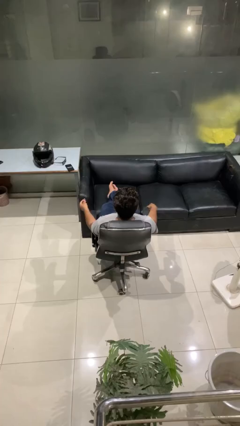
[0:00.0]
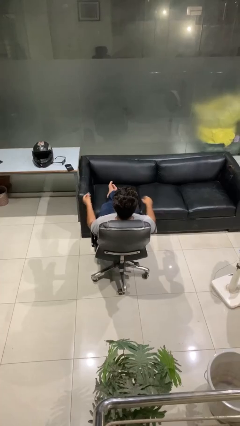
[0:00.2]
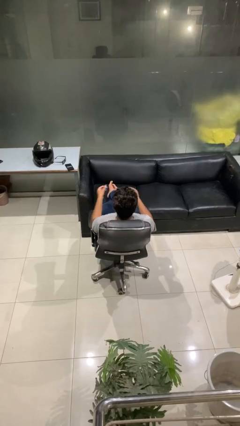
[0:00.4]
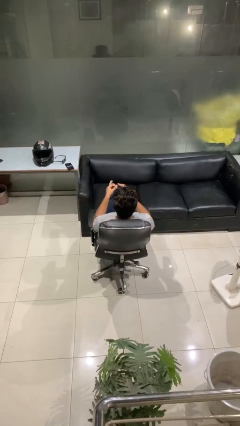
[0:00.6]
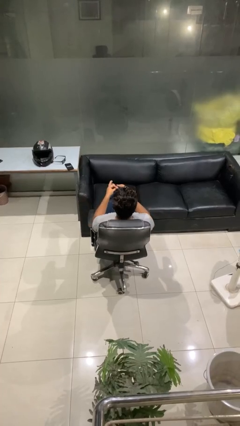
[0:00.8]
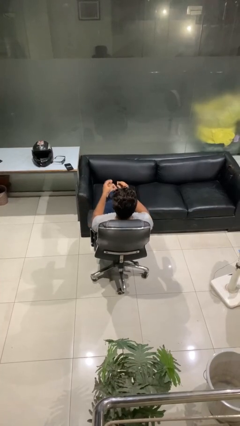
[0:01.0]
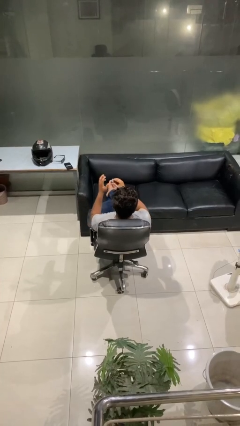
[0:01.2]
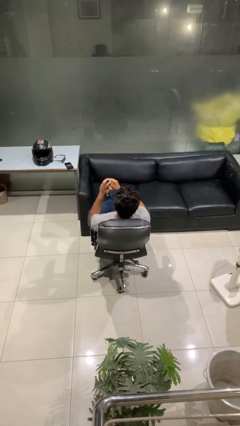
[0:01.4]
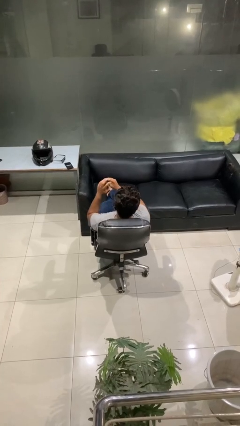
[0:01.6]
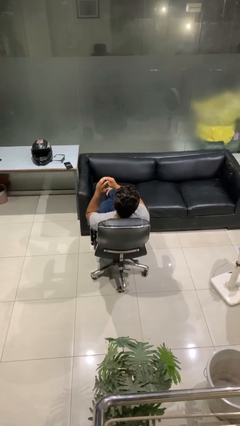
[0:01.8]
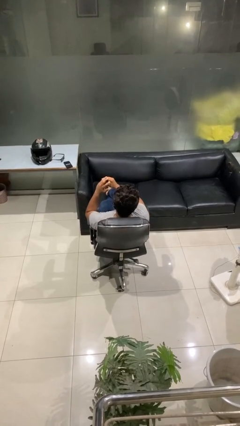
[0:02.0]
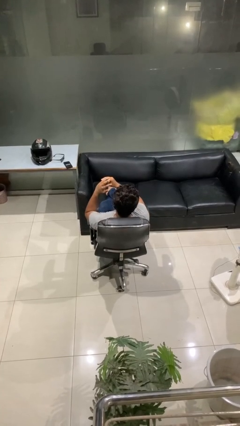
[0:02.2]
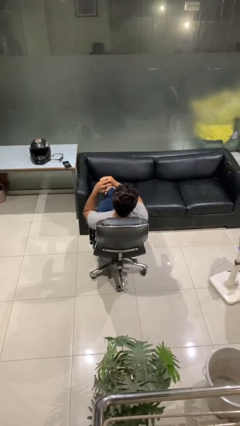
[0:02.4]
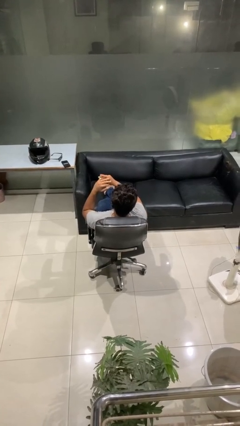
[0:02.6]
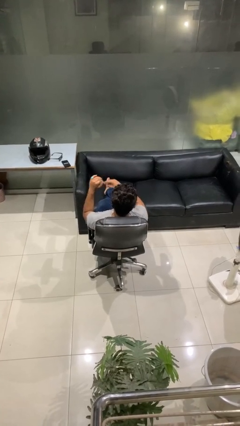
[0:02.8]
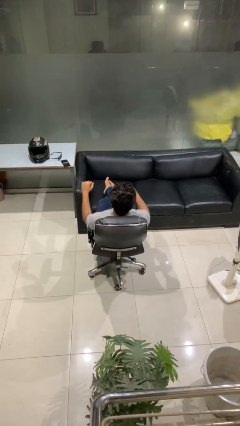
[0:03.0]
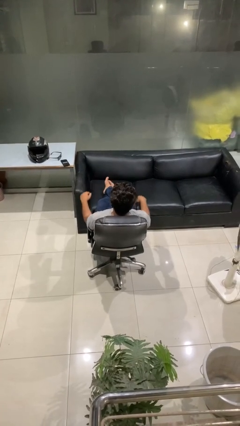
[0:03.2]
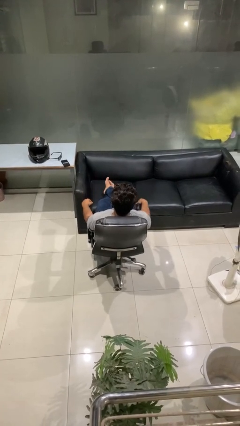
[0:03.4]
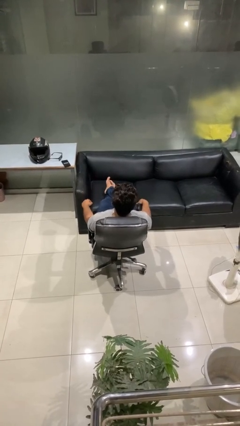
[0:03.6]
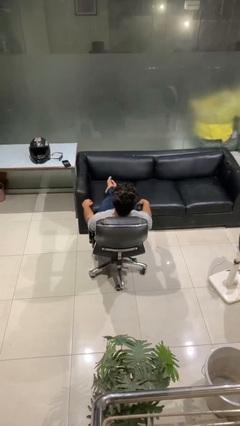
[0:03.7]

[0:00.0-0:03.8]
person puts on ring

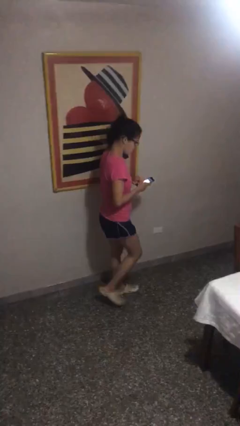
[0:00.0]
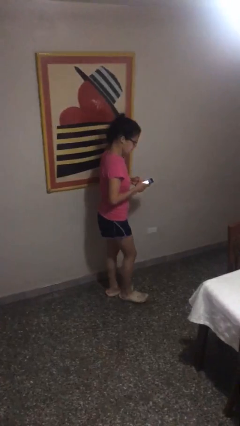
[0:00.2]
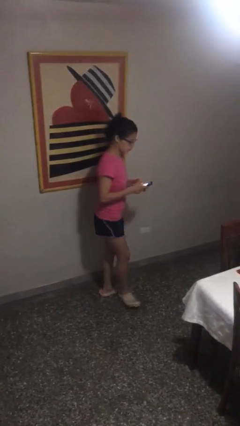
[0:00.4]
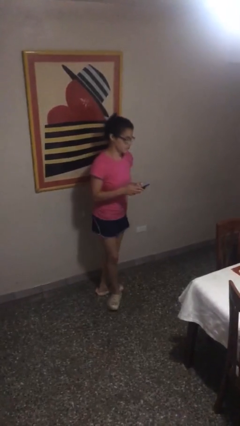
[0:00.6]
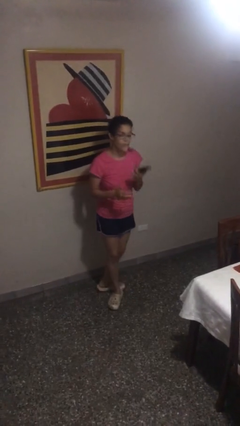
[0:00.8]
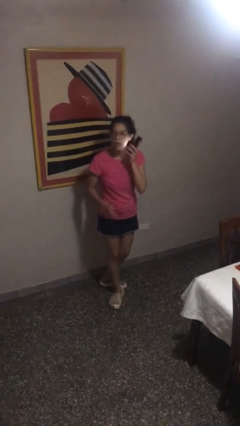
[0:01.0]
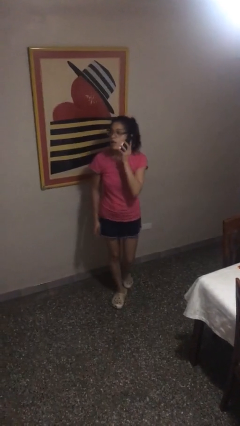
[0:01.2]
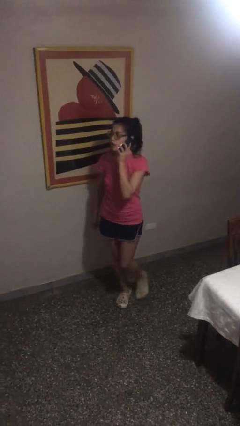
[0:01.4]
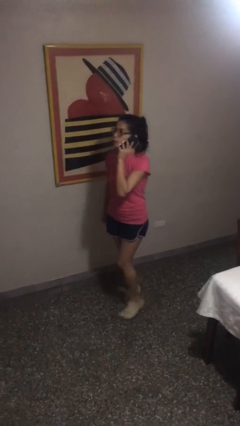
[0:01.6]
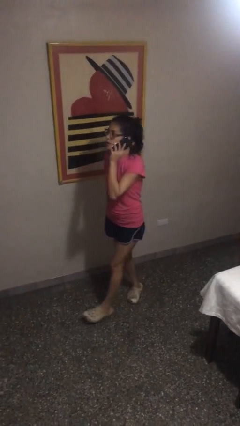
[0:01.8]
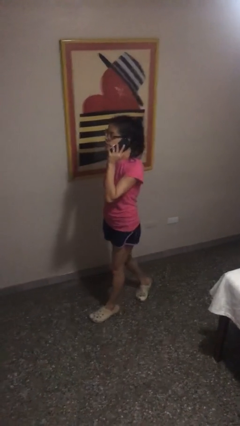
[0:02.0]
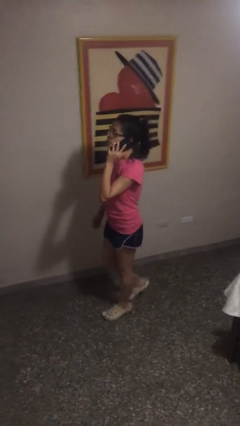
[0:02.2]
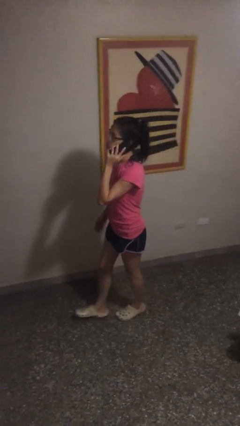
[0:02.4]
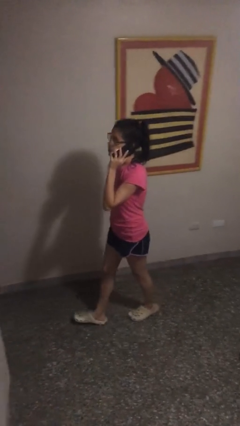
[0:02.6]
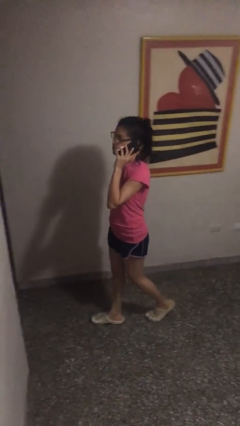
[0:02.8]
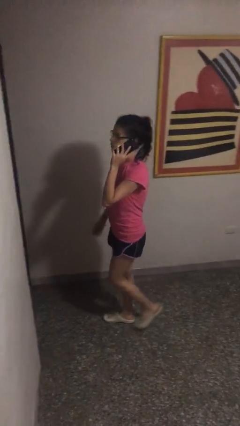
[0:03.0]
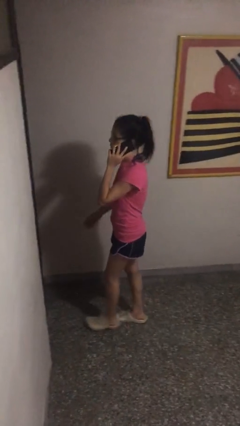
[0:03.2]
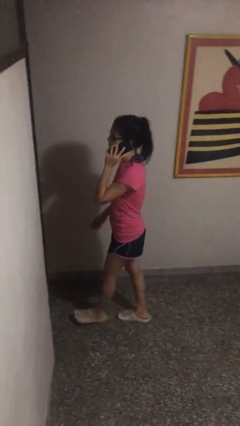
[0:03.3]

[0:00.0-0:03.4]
person talks on phone

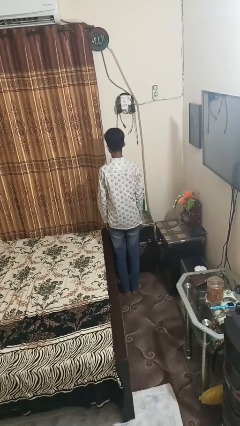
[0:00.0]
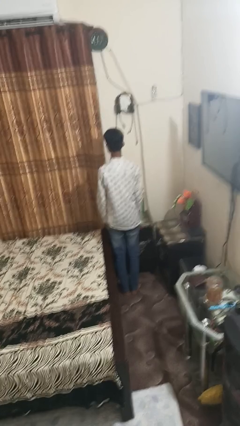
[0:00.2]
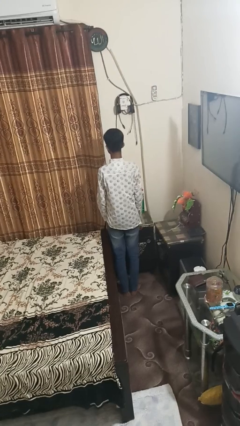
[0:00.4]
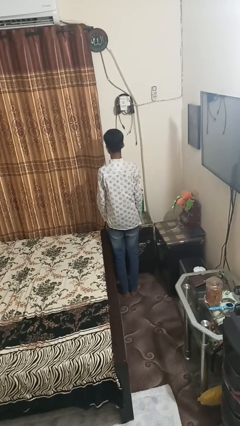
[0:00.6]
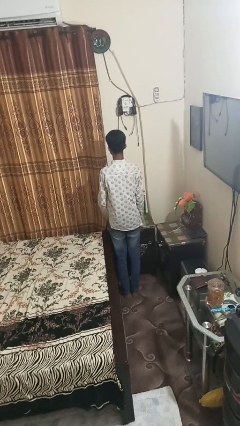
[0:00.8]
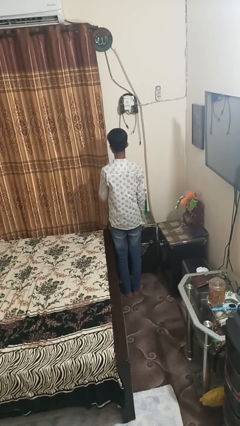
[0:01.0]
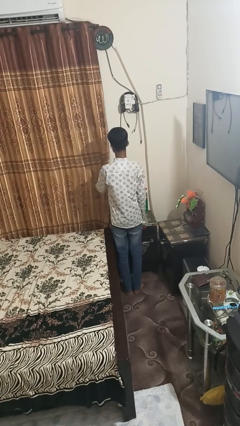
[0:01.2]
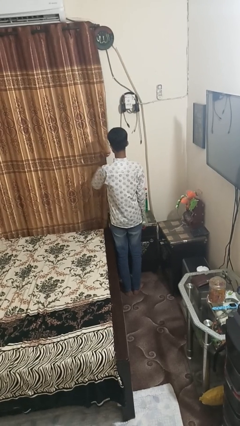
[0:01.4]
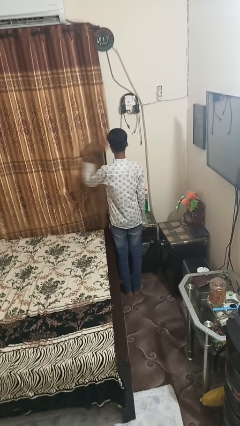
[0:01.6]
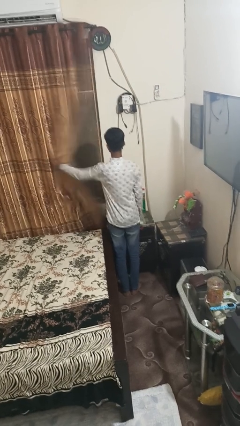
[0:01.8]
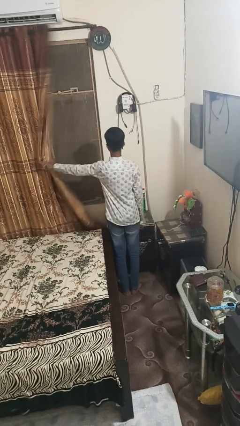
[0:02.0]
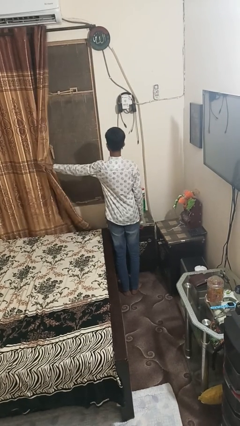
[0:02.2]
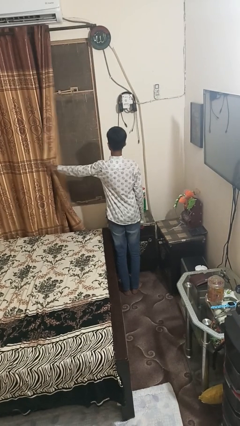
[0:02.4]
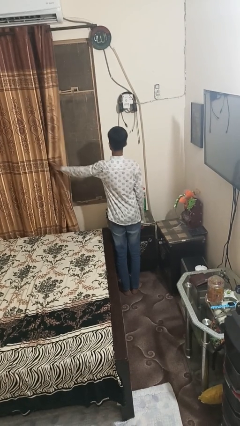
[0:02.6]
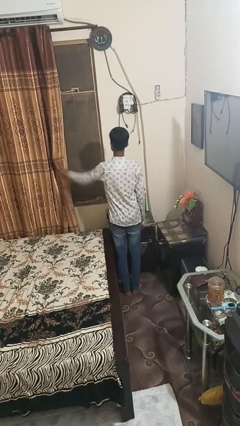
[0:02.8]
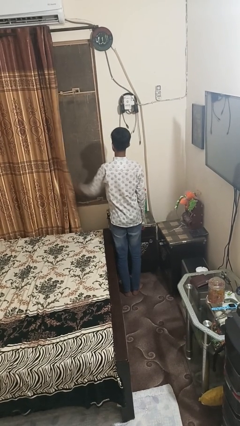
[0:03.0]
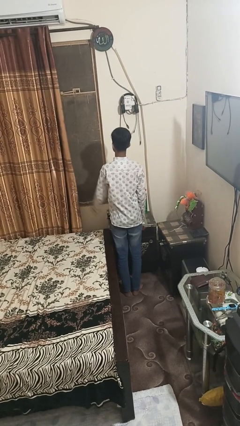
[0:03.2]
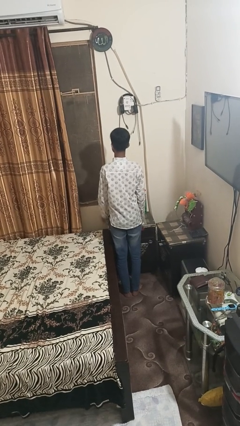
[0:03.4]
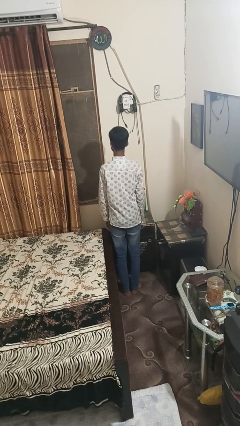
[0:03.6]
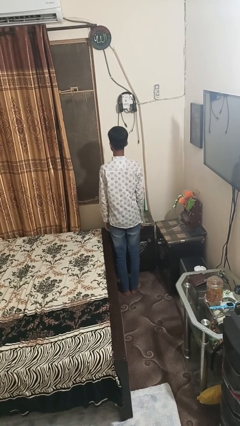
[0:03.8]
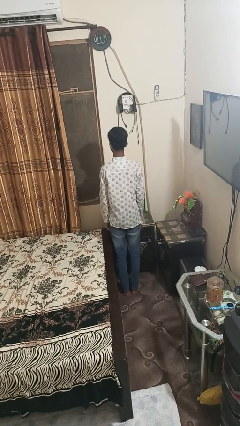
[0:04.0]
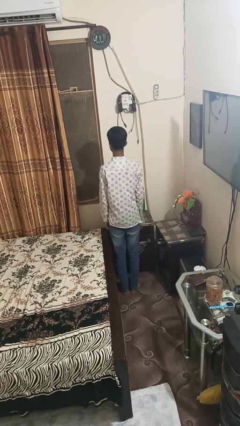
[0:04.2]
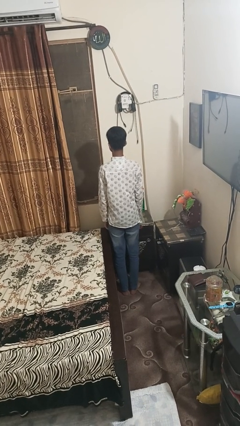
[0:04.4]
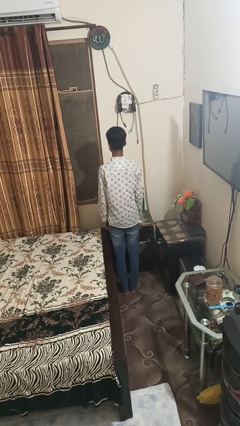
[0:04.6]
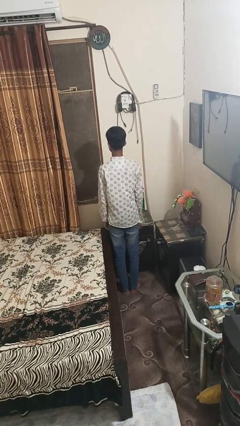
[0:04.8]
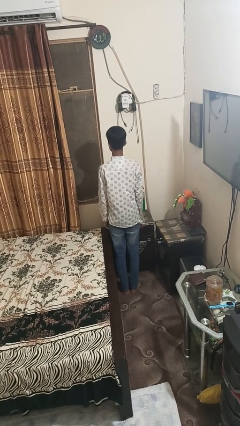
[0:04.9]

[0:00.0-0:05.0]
person opens curtains

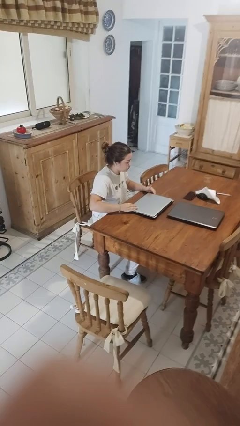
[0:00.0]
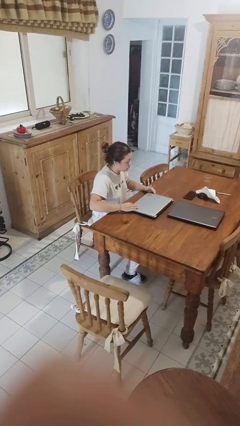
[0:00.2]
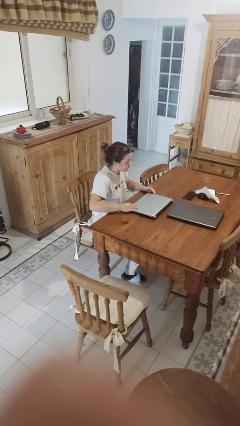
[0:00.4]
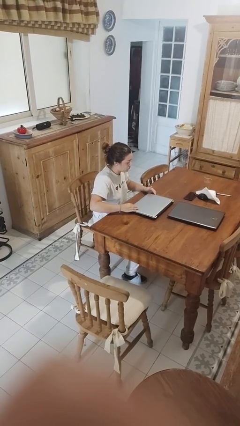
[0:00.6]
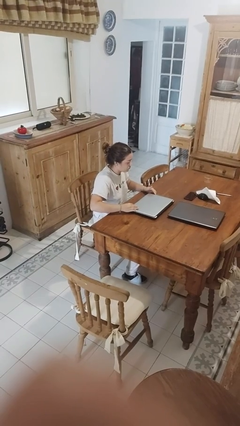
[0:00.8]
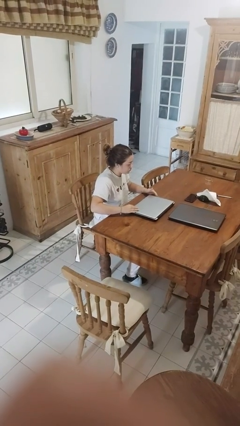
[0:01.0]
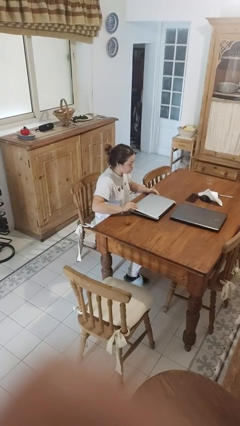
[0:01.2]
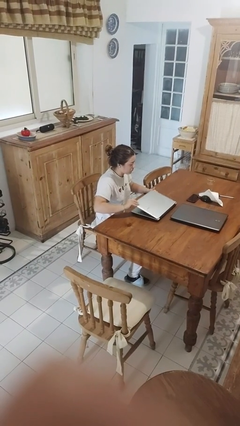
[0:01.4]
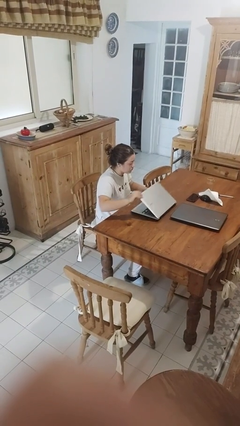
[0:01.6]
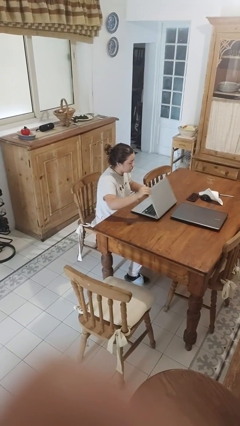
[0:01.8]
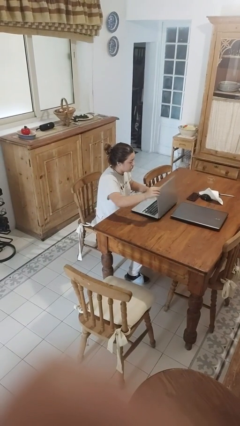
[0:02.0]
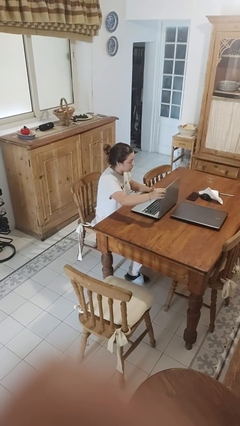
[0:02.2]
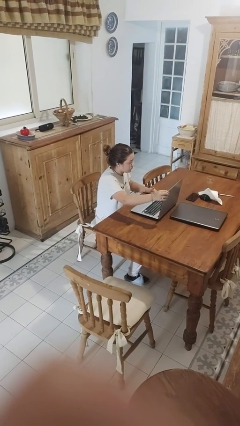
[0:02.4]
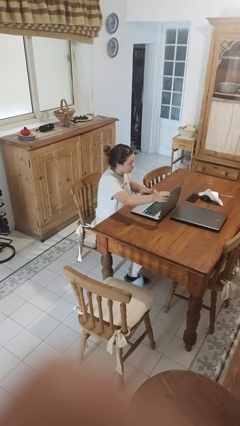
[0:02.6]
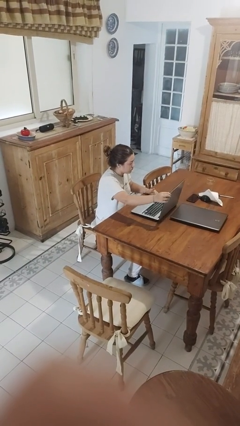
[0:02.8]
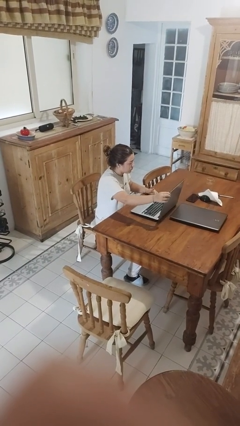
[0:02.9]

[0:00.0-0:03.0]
person opens laptop

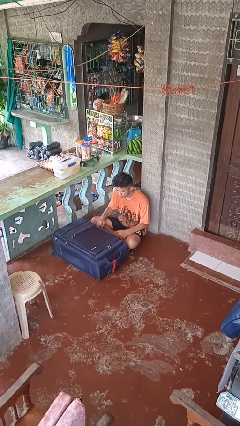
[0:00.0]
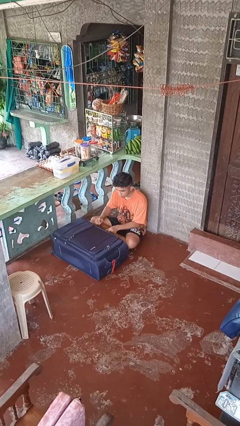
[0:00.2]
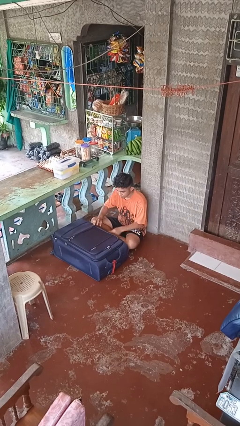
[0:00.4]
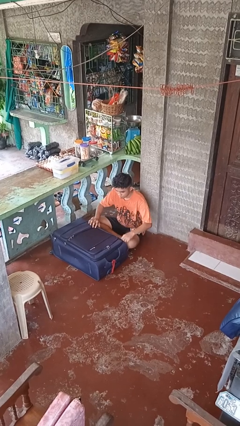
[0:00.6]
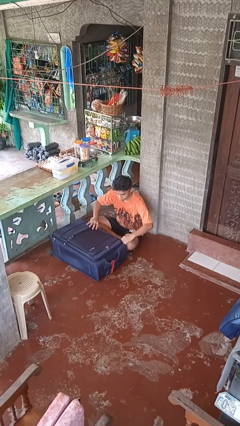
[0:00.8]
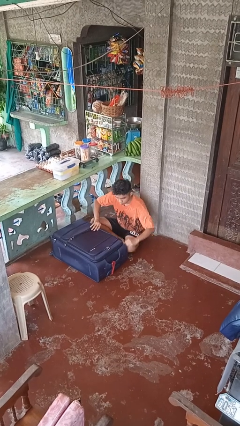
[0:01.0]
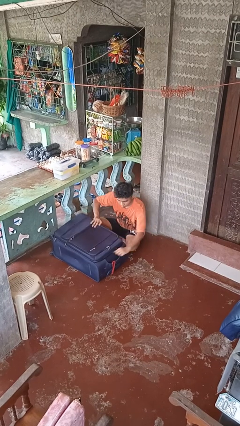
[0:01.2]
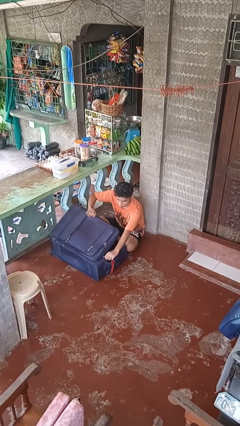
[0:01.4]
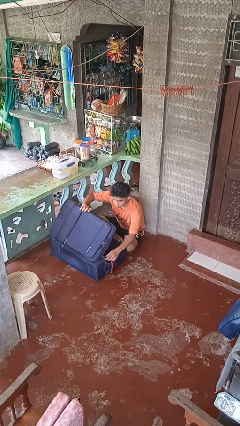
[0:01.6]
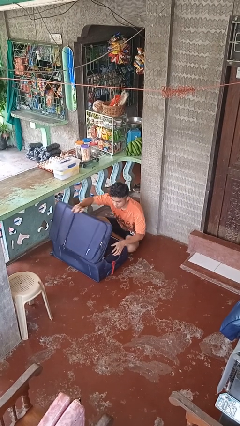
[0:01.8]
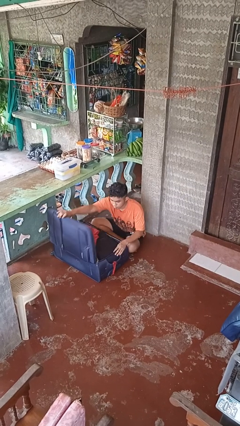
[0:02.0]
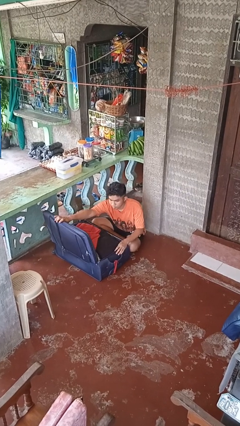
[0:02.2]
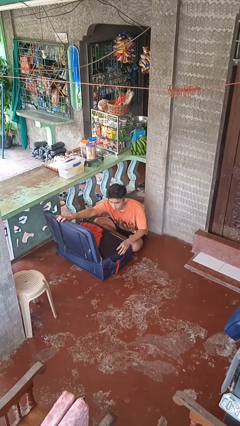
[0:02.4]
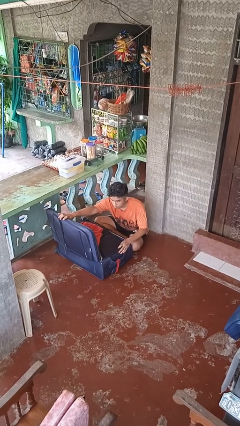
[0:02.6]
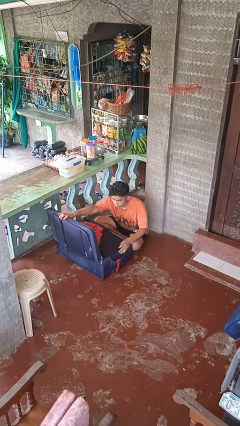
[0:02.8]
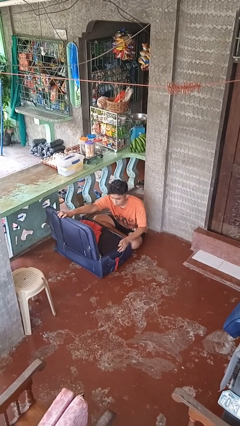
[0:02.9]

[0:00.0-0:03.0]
person opens suitcase
